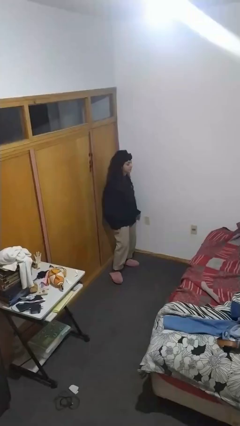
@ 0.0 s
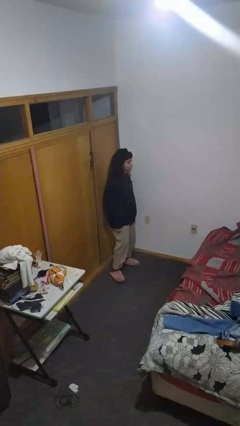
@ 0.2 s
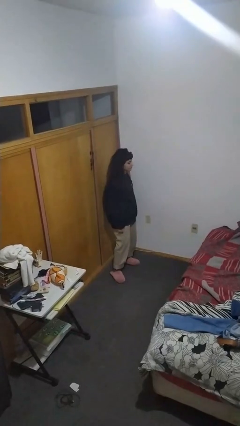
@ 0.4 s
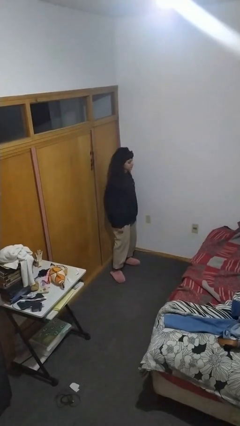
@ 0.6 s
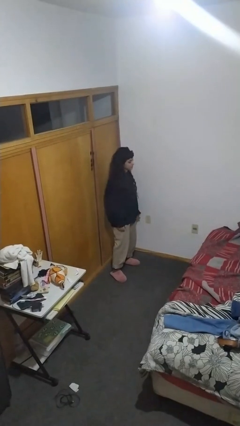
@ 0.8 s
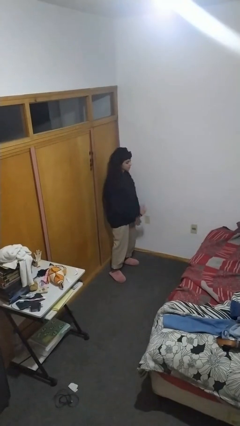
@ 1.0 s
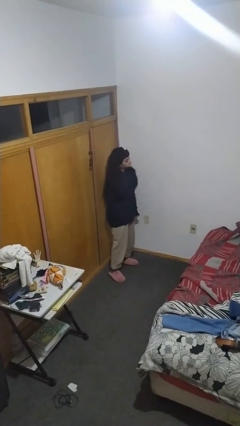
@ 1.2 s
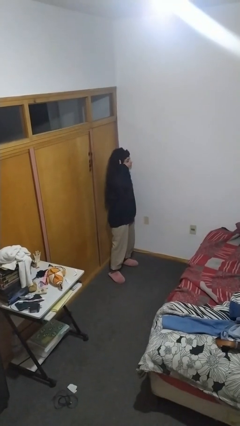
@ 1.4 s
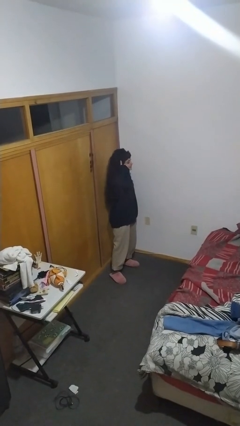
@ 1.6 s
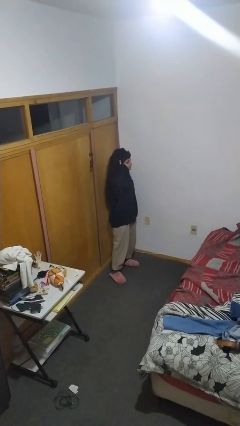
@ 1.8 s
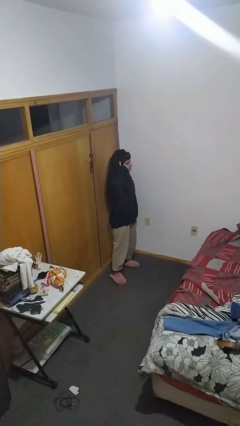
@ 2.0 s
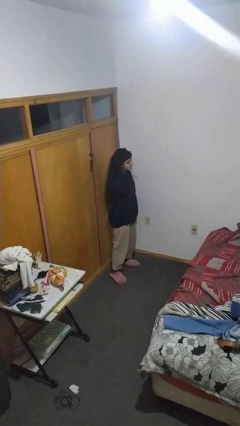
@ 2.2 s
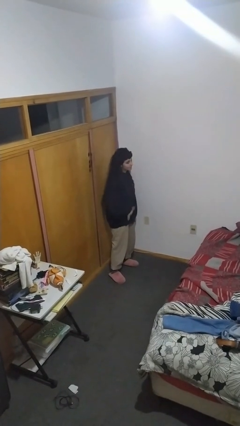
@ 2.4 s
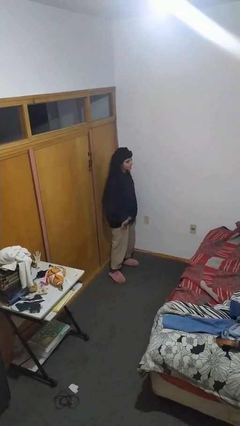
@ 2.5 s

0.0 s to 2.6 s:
person gestures call me

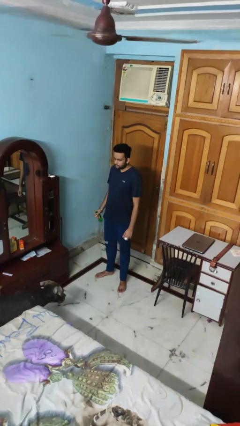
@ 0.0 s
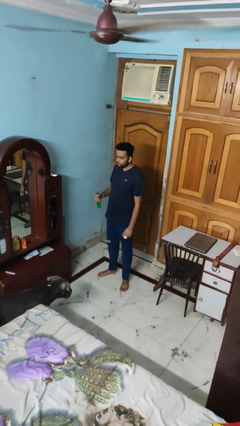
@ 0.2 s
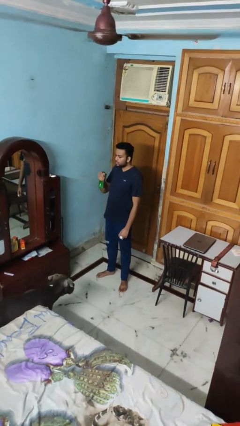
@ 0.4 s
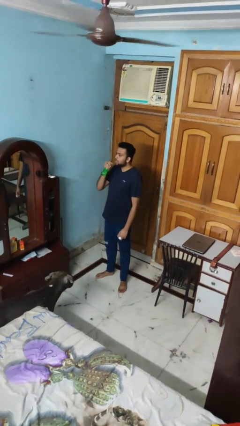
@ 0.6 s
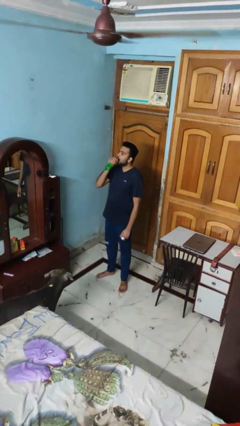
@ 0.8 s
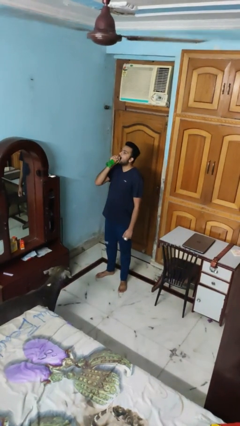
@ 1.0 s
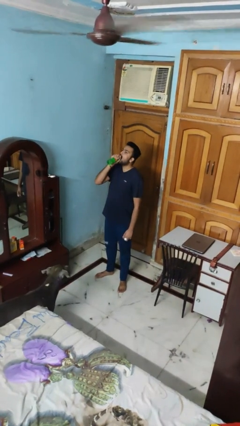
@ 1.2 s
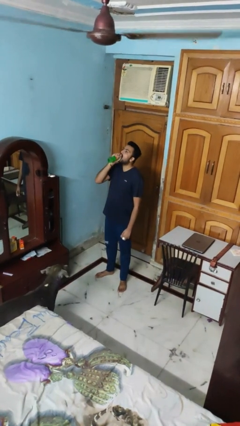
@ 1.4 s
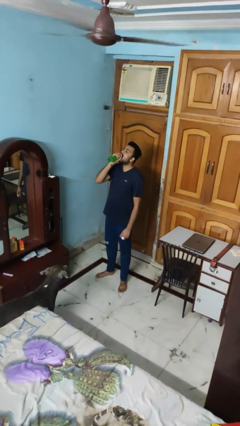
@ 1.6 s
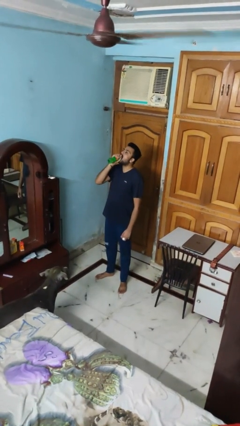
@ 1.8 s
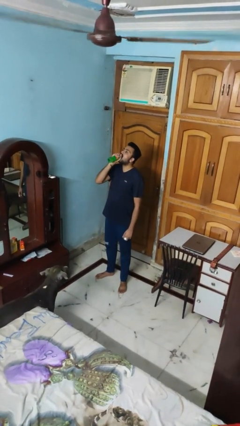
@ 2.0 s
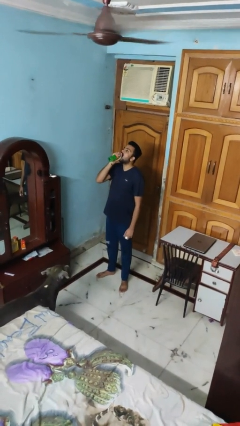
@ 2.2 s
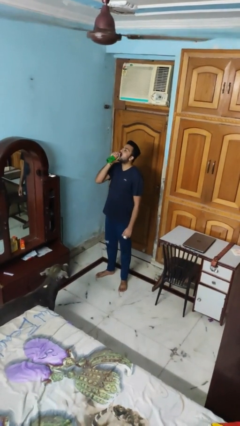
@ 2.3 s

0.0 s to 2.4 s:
person drinks from bottle

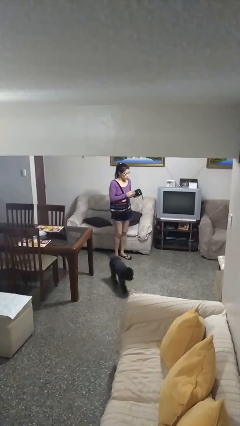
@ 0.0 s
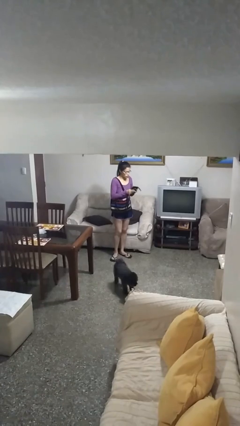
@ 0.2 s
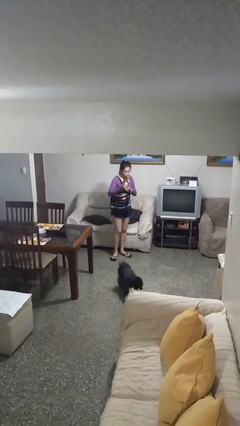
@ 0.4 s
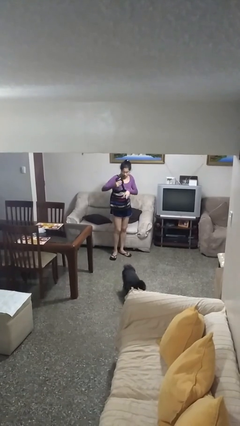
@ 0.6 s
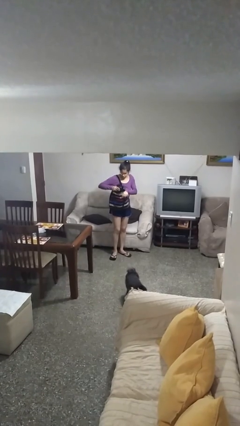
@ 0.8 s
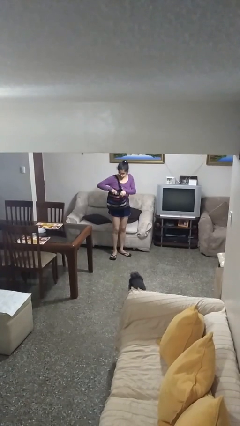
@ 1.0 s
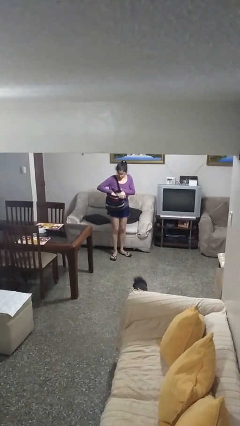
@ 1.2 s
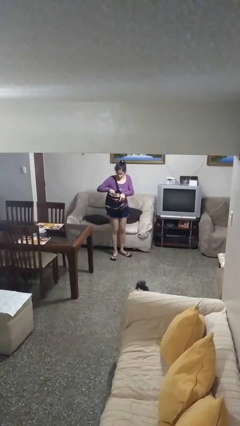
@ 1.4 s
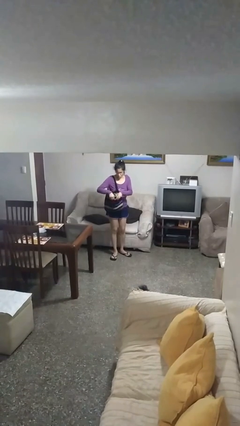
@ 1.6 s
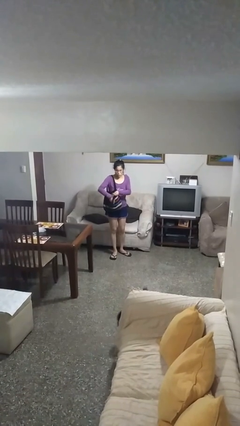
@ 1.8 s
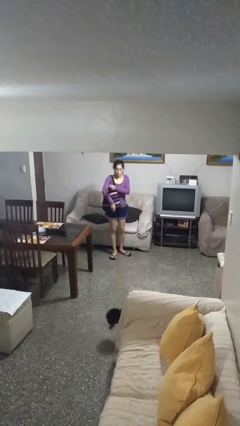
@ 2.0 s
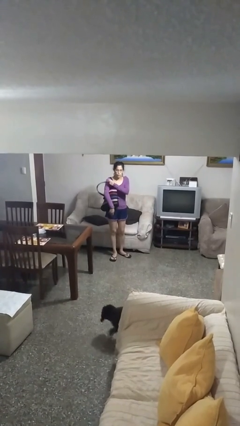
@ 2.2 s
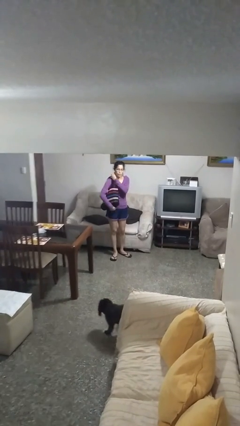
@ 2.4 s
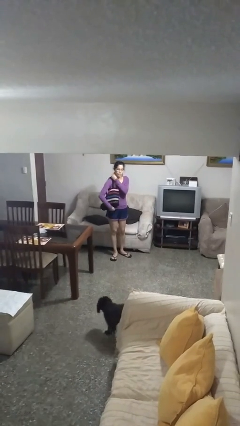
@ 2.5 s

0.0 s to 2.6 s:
person puts object into purse

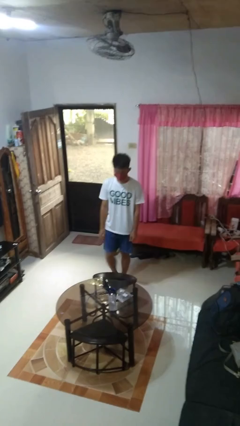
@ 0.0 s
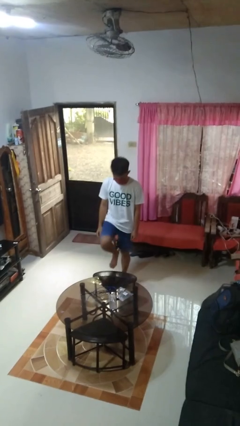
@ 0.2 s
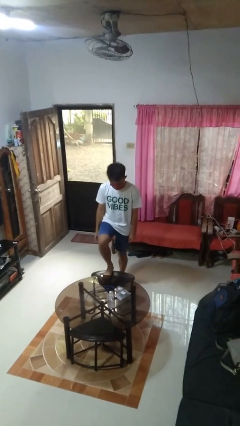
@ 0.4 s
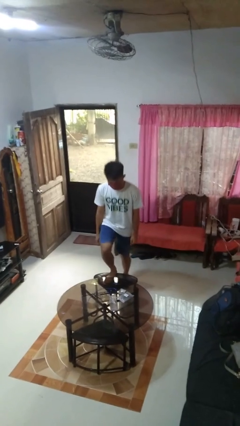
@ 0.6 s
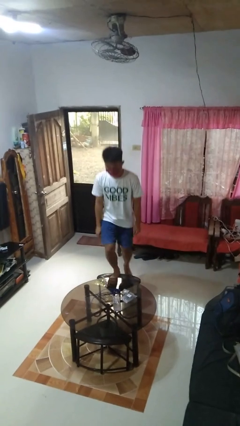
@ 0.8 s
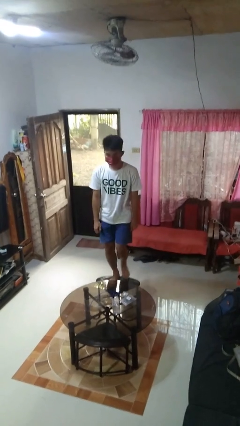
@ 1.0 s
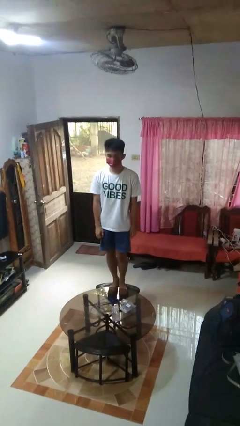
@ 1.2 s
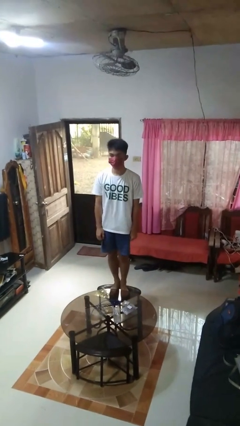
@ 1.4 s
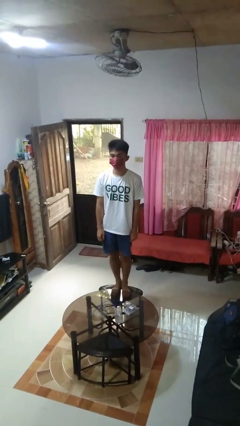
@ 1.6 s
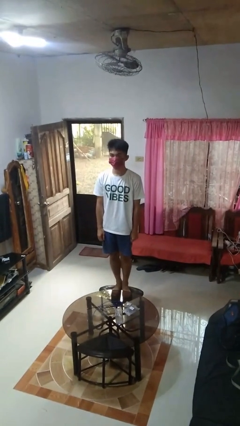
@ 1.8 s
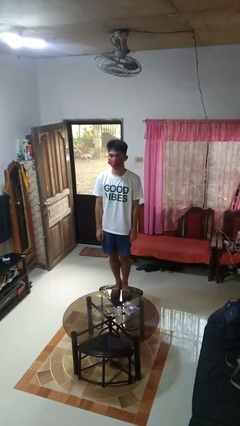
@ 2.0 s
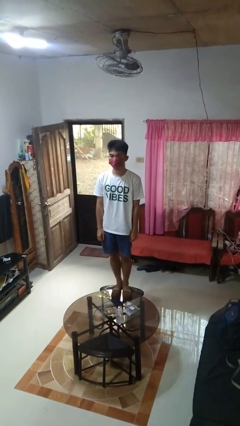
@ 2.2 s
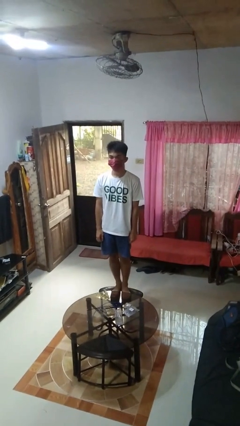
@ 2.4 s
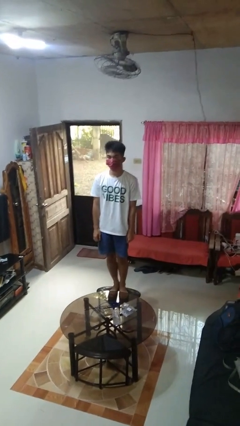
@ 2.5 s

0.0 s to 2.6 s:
person climbs on chair

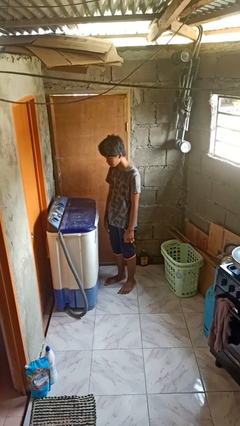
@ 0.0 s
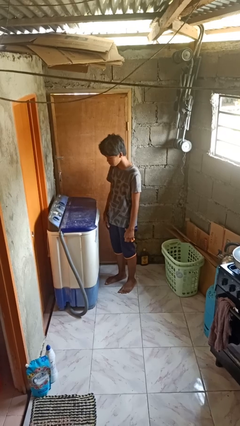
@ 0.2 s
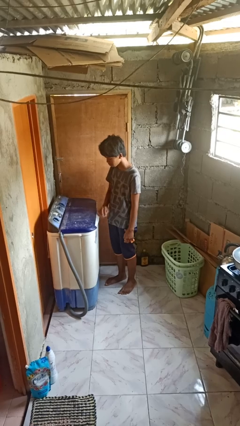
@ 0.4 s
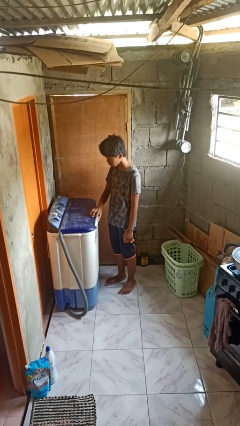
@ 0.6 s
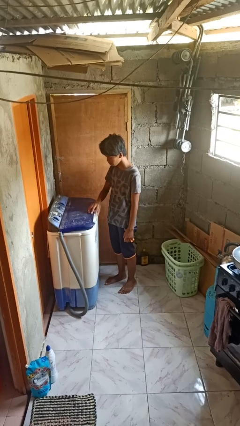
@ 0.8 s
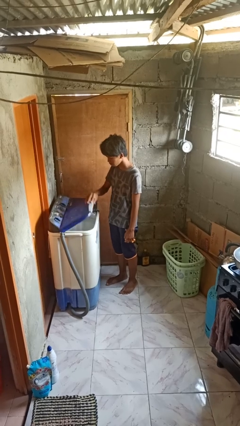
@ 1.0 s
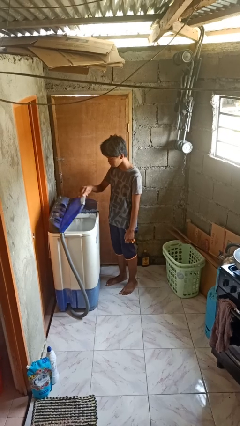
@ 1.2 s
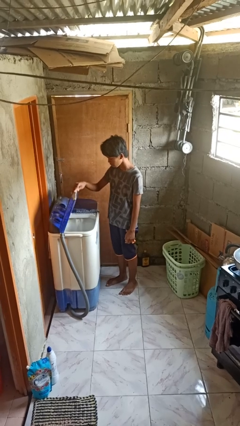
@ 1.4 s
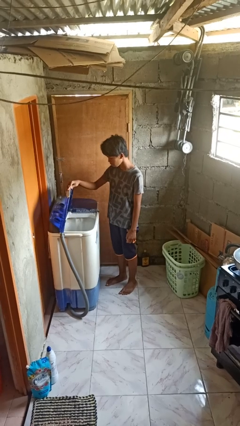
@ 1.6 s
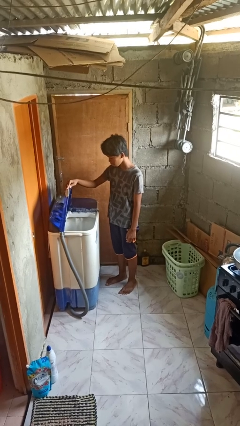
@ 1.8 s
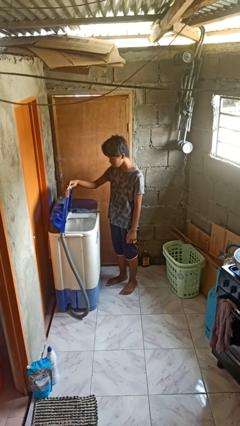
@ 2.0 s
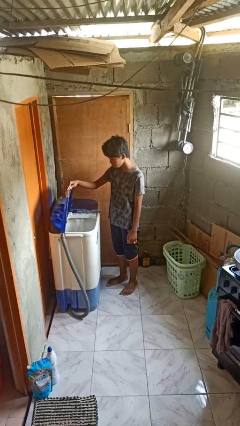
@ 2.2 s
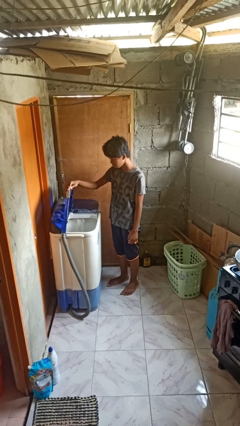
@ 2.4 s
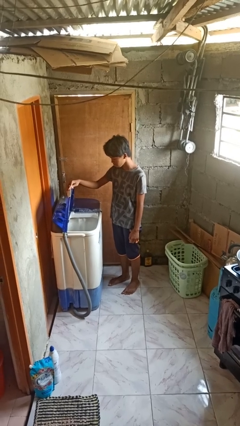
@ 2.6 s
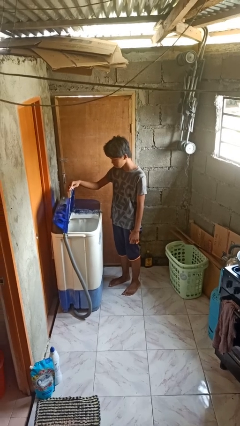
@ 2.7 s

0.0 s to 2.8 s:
person opens clothes washer

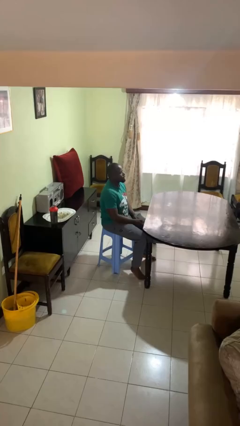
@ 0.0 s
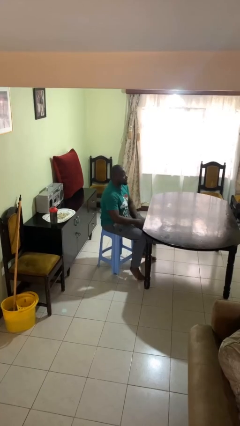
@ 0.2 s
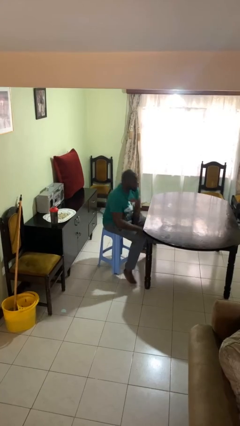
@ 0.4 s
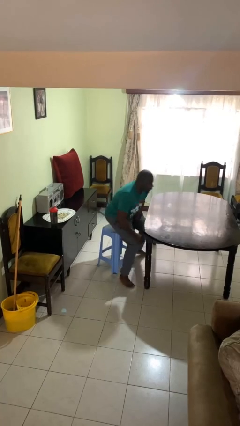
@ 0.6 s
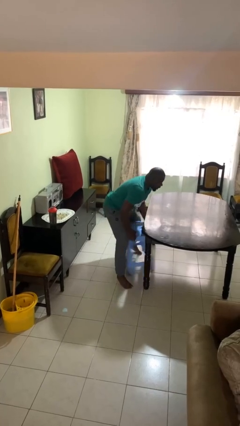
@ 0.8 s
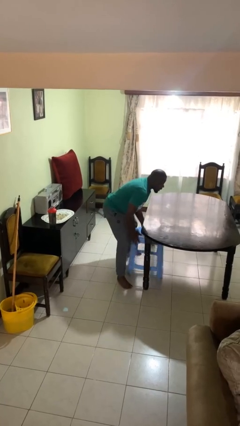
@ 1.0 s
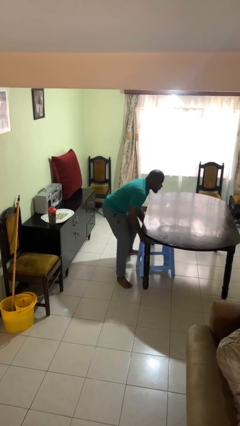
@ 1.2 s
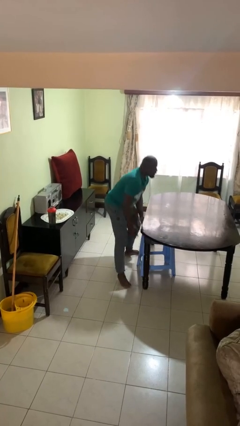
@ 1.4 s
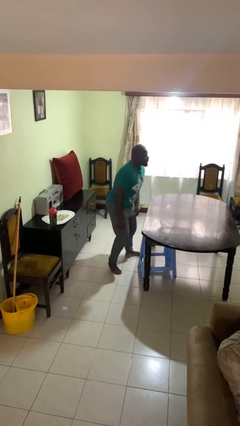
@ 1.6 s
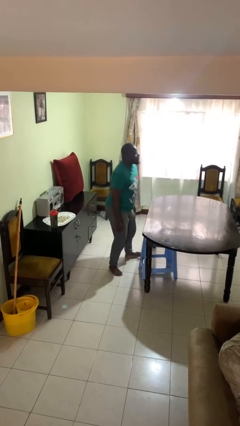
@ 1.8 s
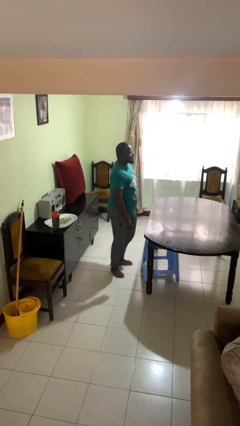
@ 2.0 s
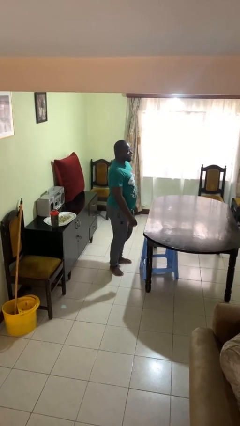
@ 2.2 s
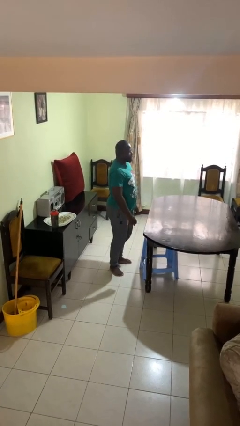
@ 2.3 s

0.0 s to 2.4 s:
person stands up

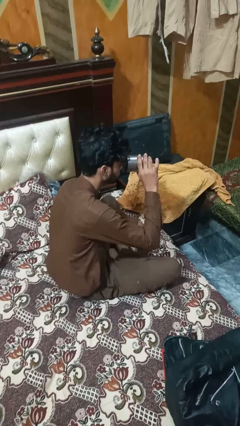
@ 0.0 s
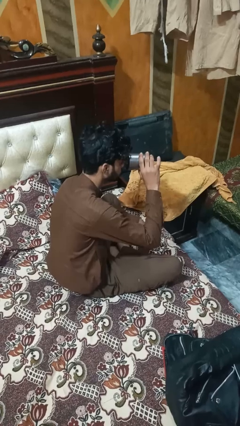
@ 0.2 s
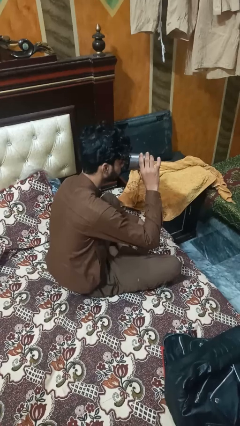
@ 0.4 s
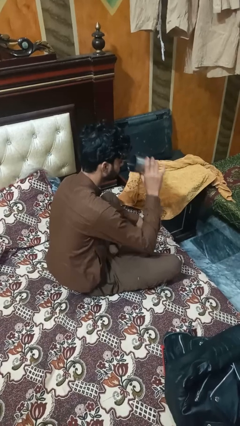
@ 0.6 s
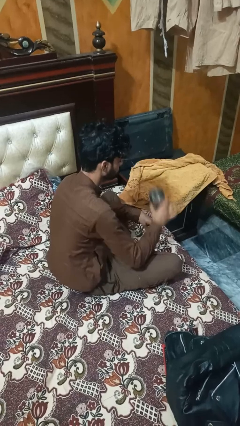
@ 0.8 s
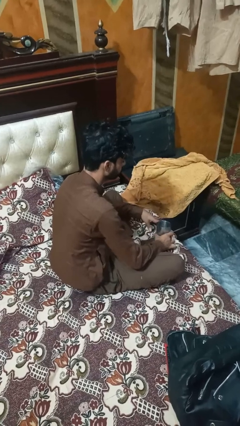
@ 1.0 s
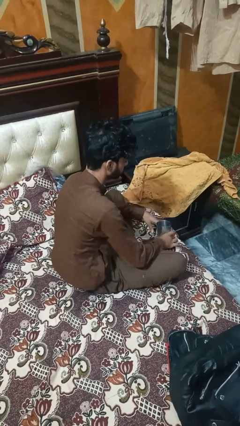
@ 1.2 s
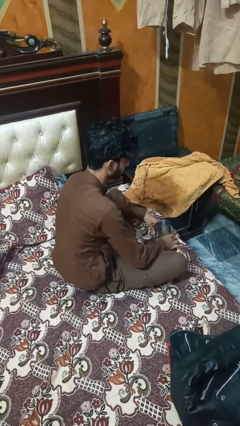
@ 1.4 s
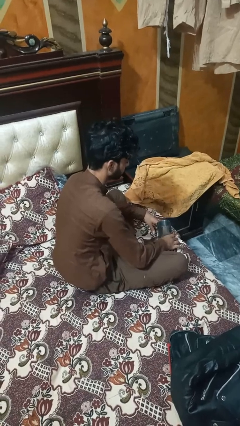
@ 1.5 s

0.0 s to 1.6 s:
person puts down object on table
